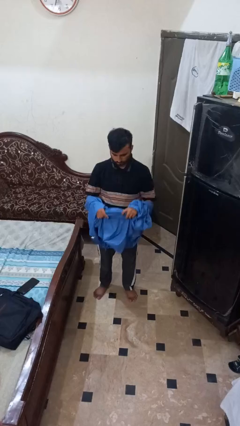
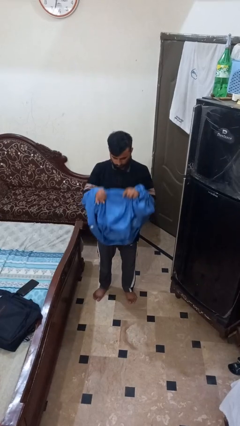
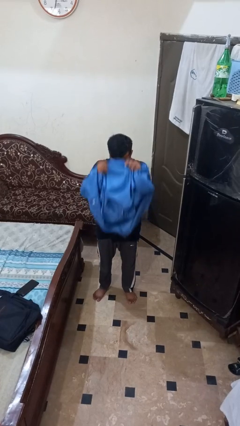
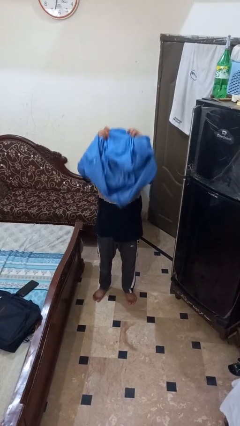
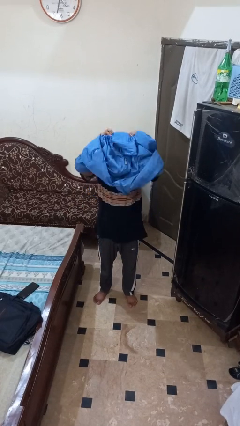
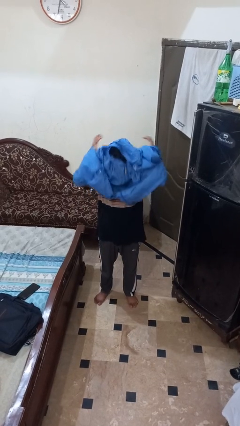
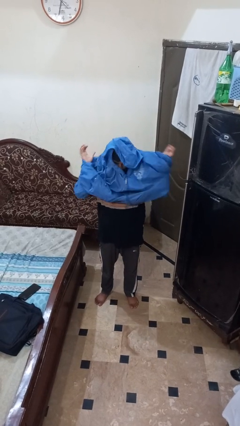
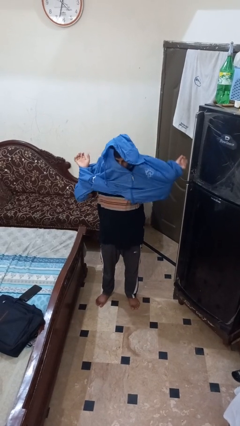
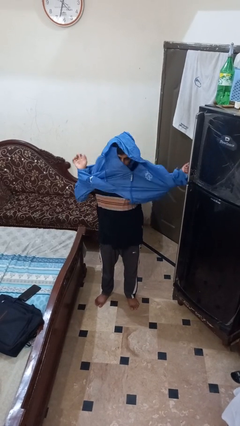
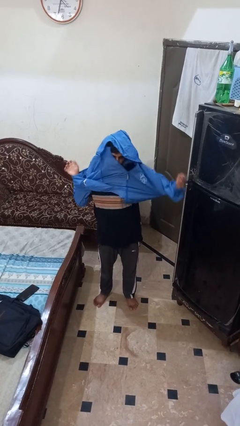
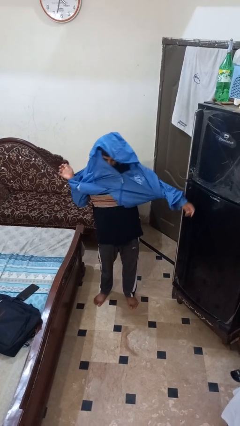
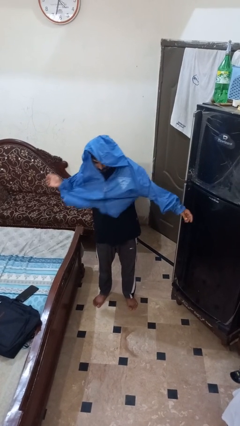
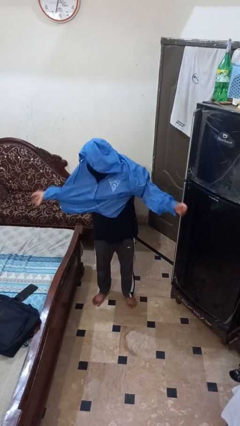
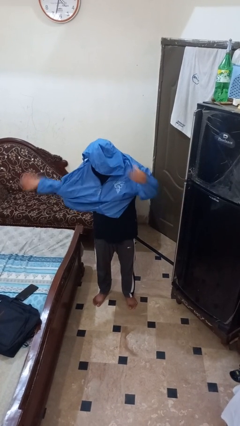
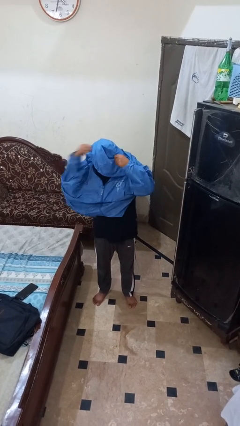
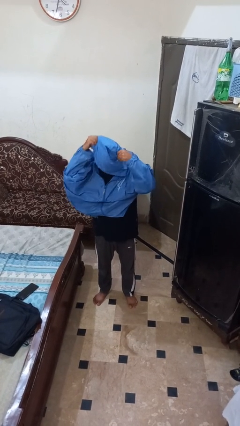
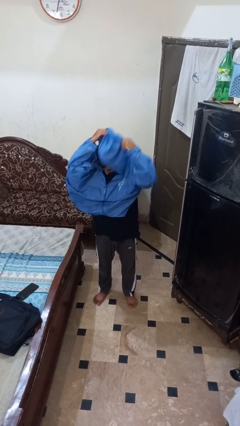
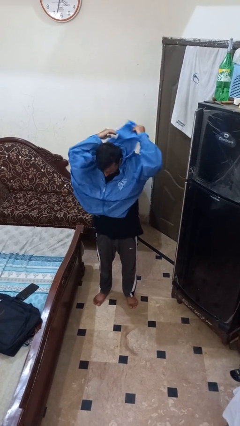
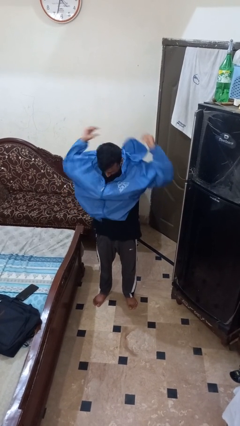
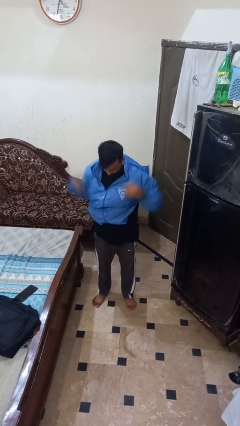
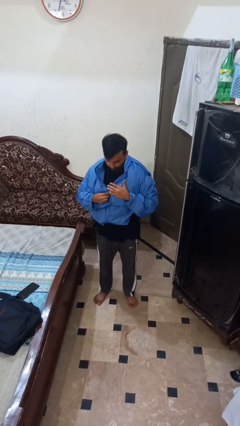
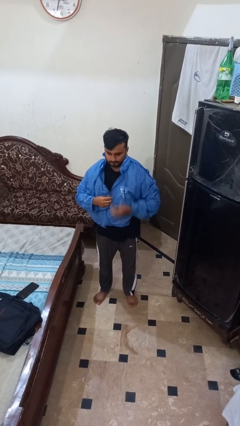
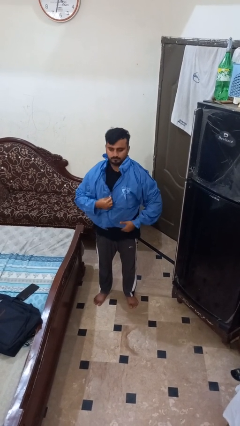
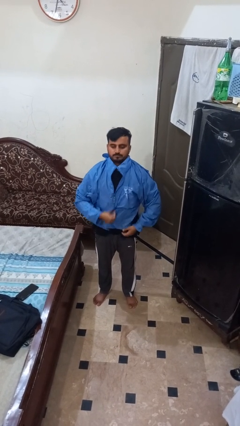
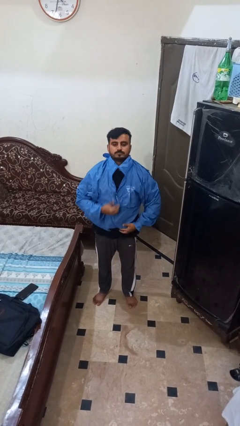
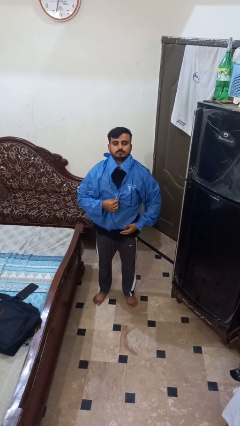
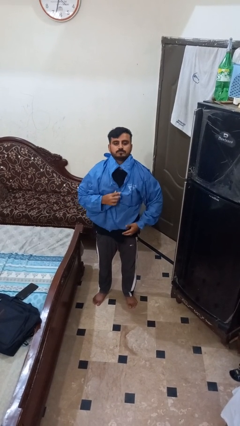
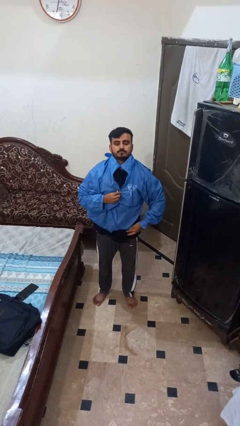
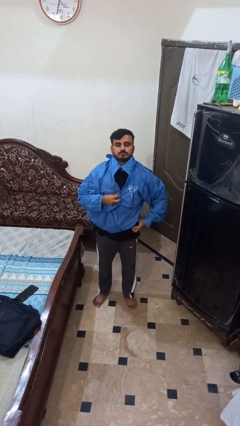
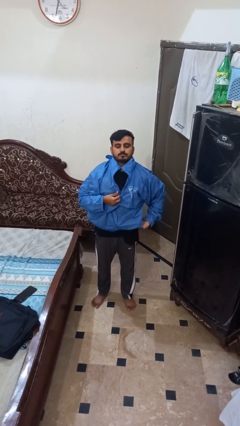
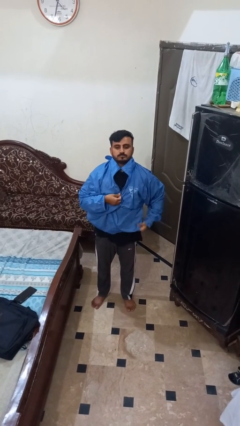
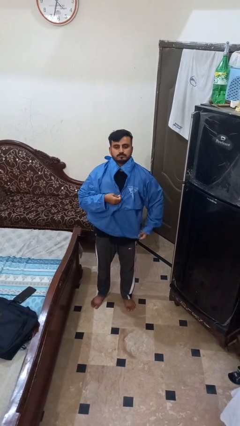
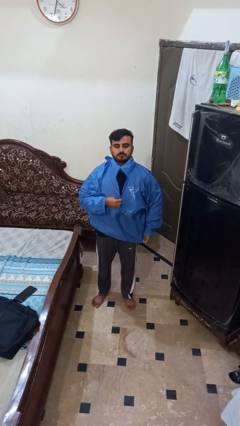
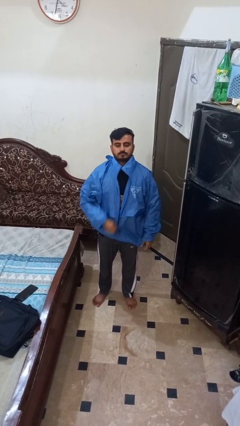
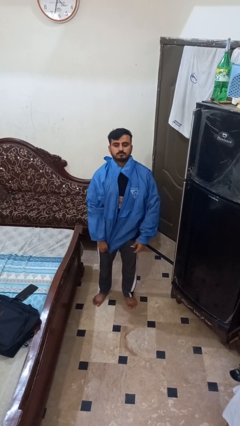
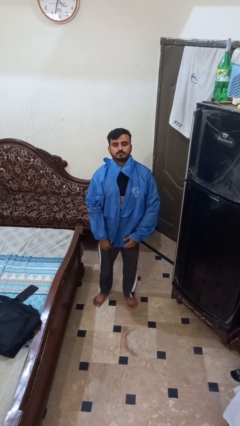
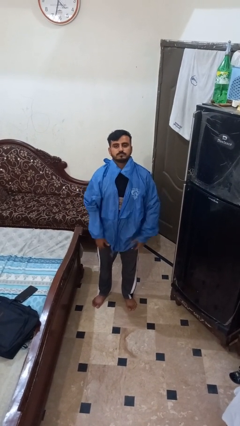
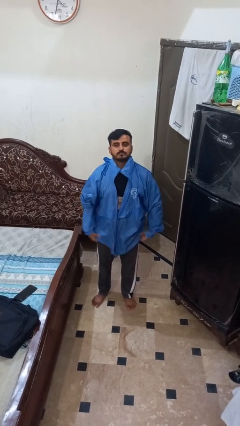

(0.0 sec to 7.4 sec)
person puts on jacket

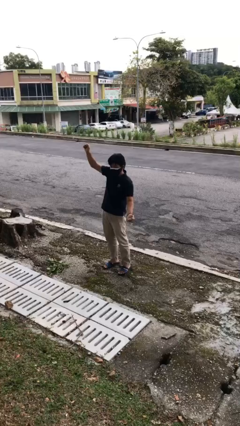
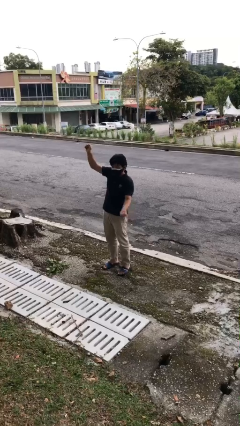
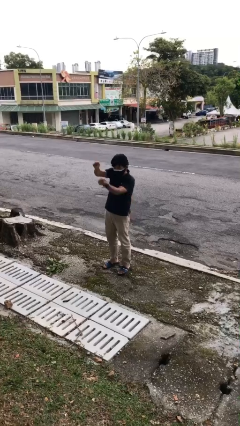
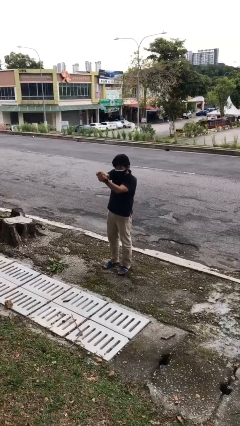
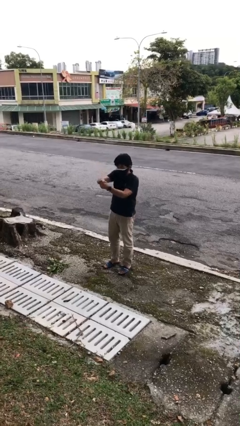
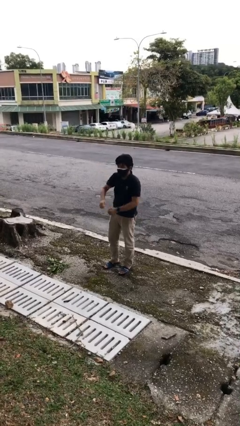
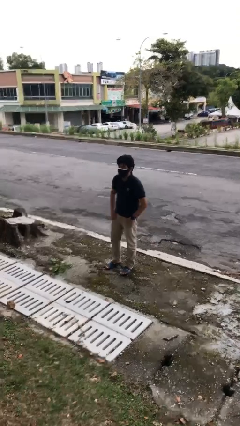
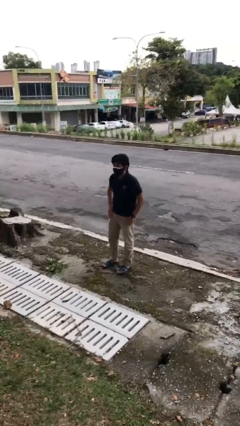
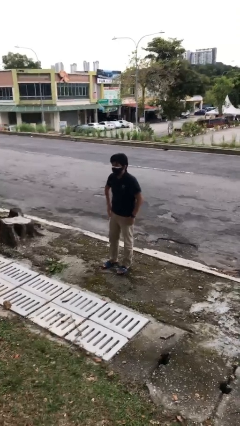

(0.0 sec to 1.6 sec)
person gestures zoom out

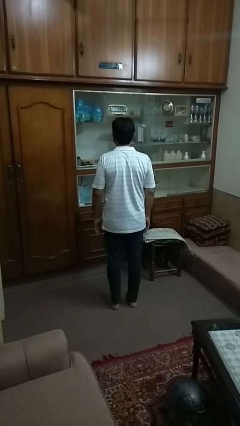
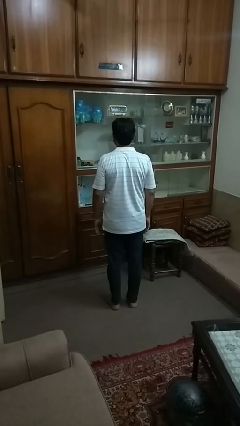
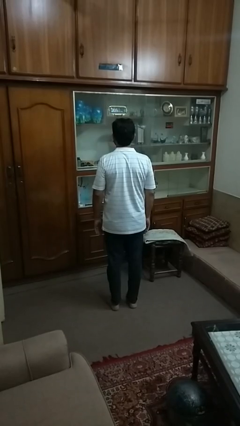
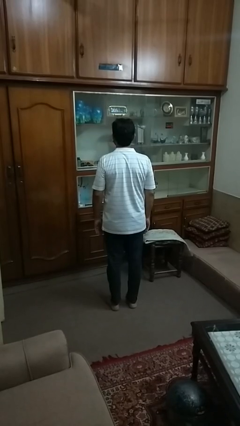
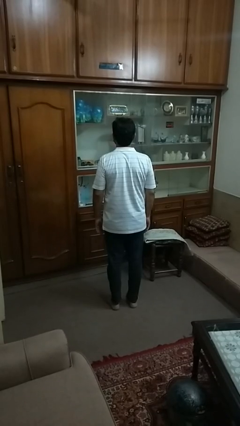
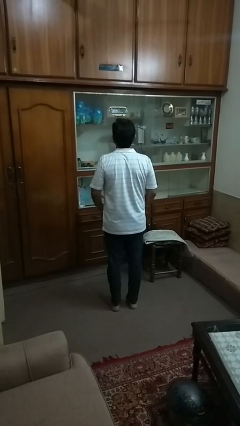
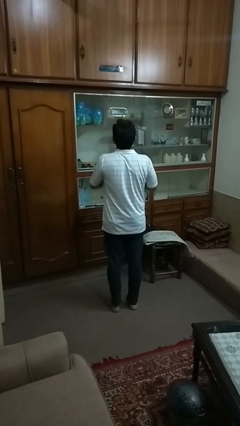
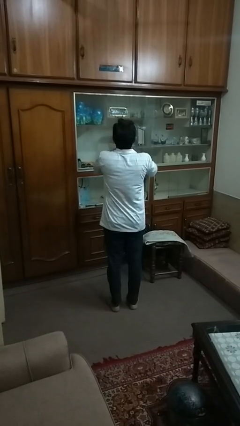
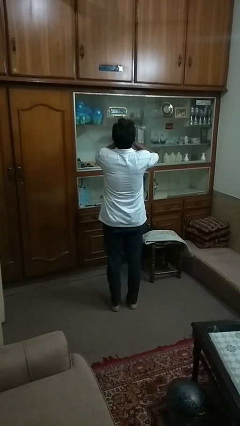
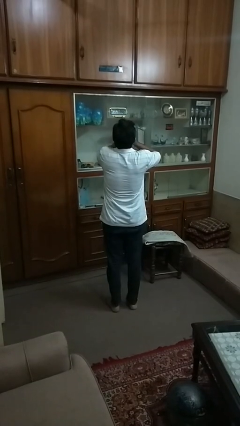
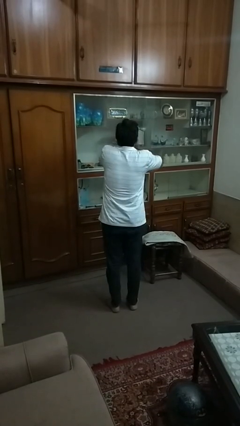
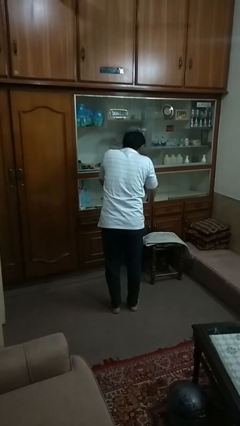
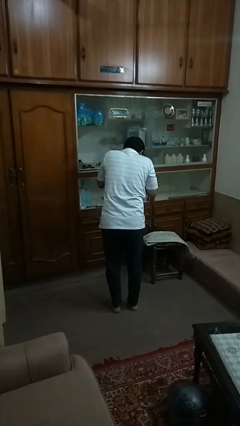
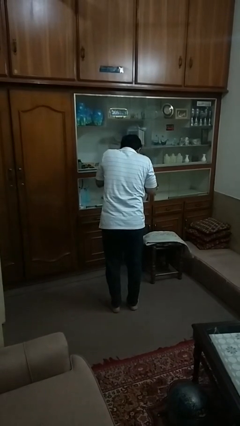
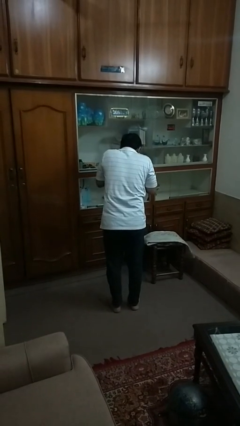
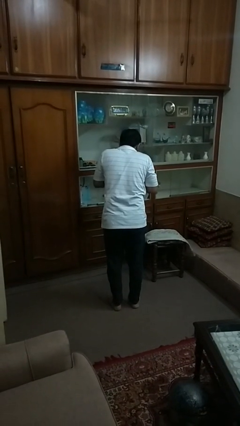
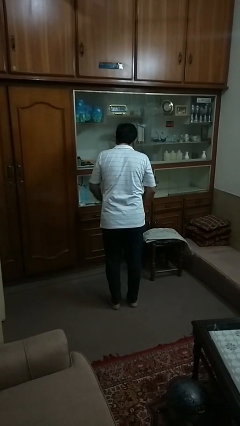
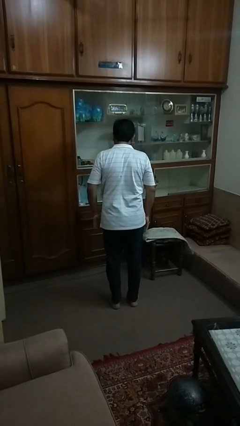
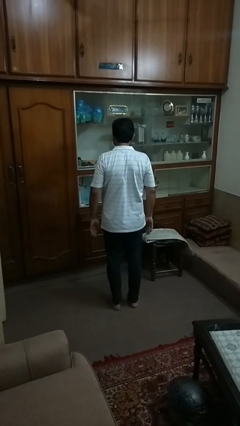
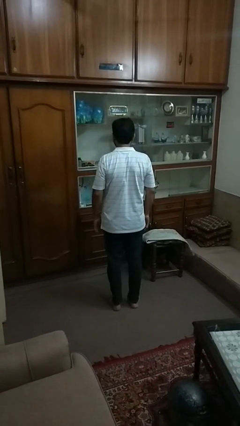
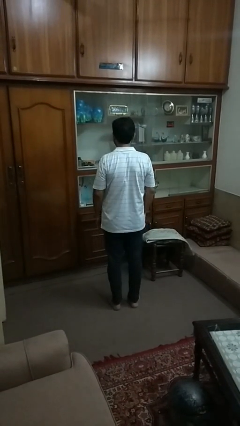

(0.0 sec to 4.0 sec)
person sneezes into hand

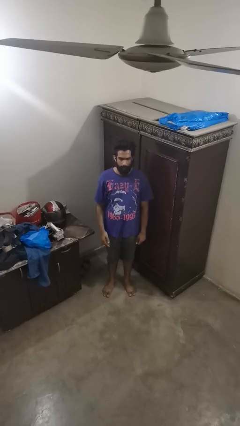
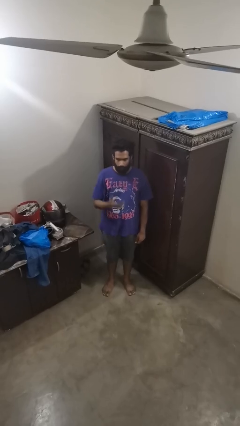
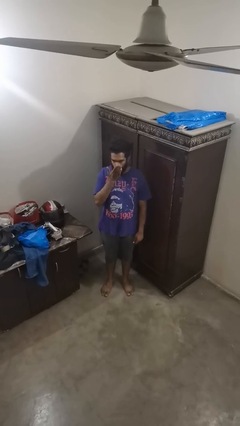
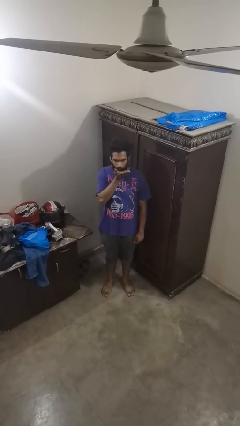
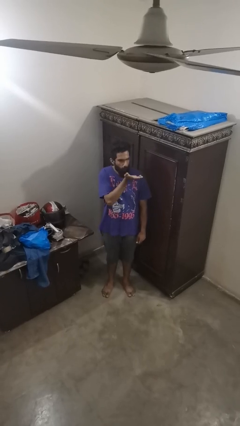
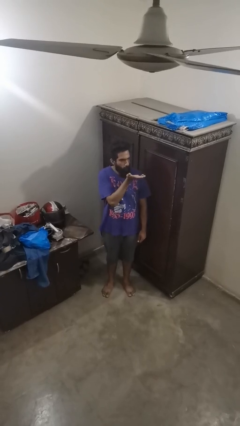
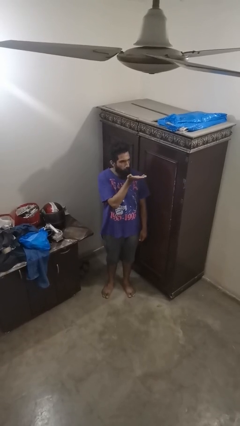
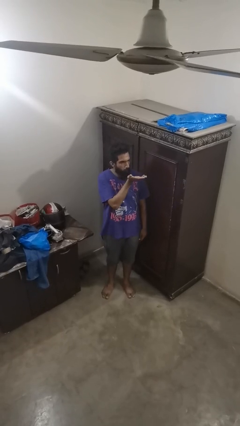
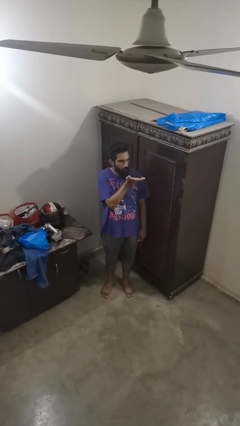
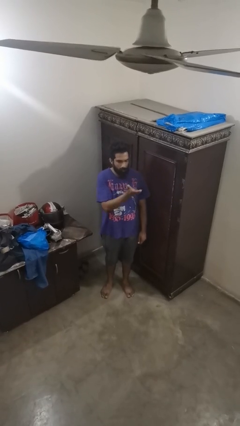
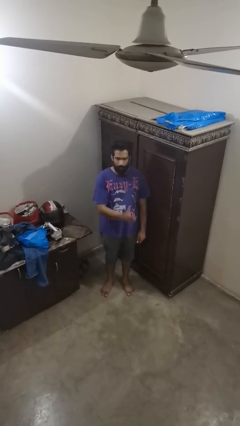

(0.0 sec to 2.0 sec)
person gestures blow kiss

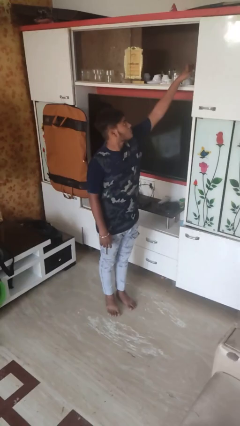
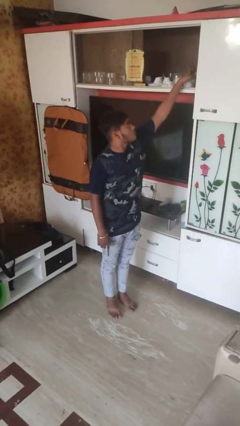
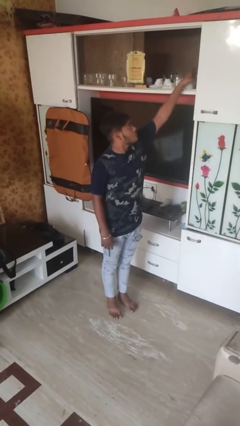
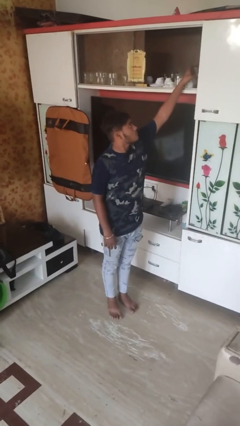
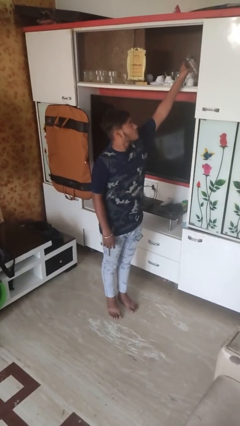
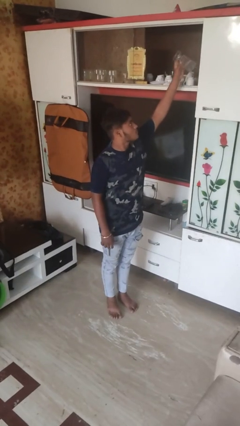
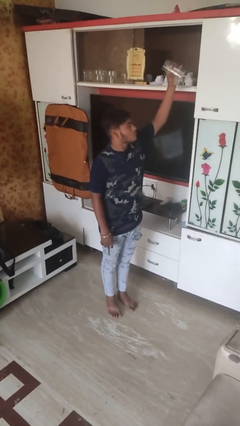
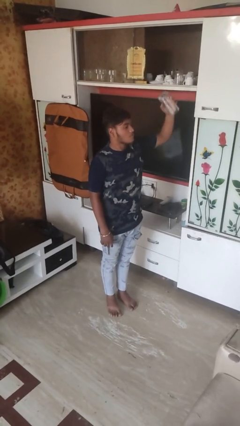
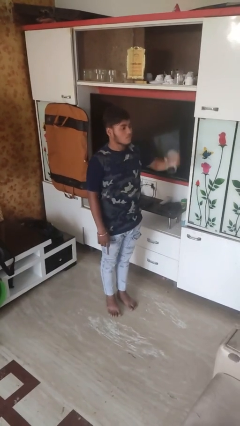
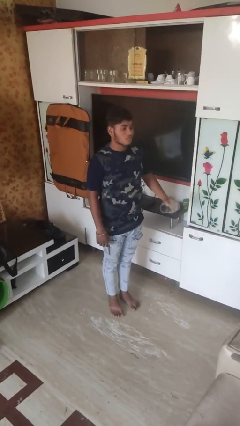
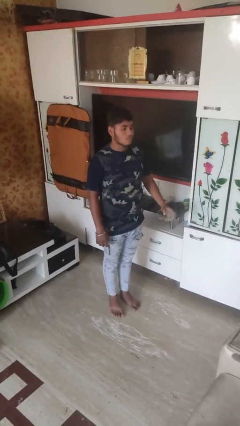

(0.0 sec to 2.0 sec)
person takes object from cabinet

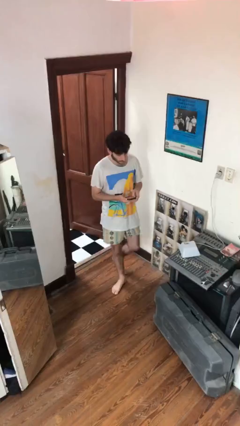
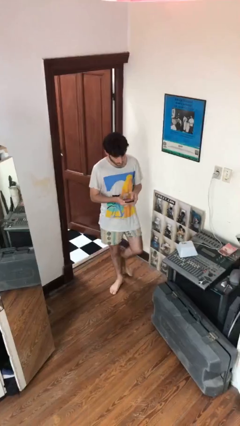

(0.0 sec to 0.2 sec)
person exits scene through structure
